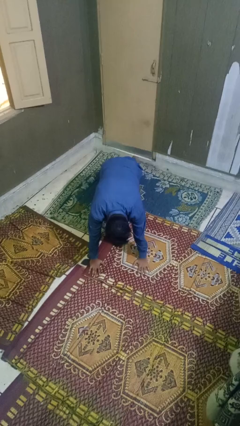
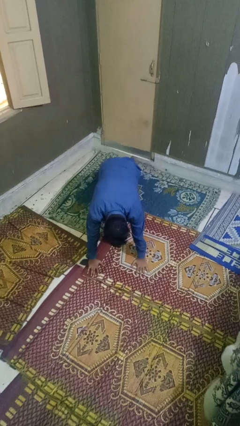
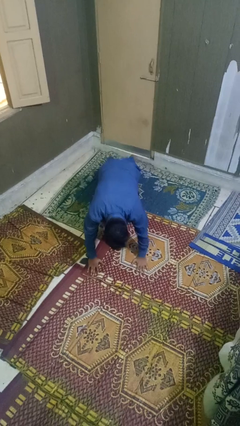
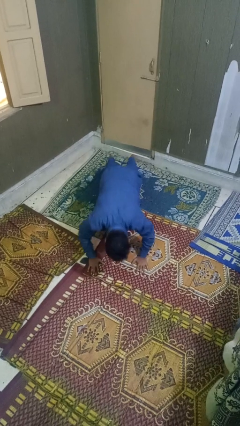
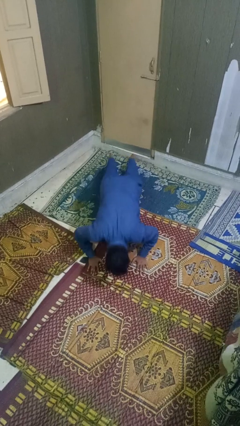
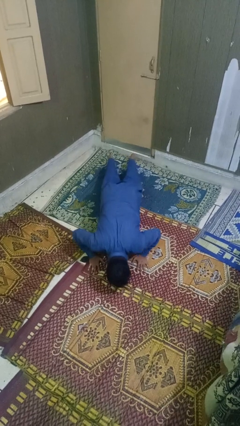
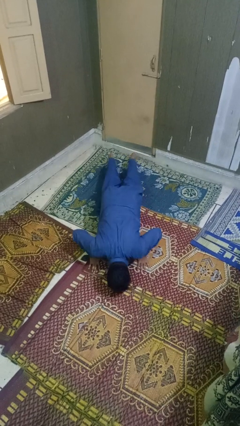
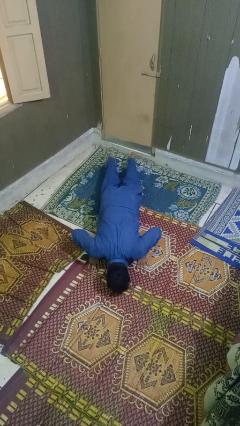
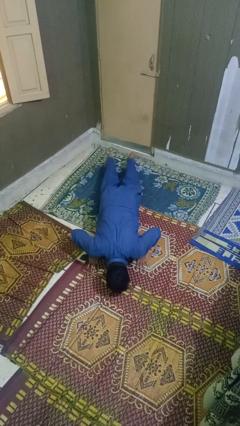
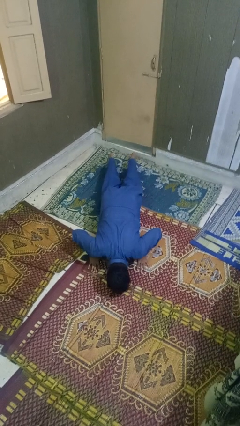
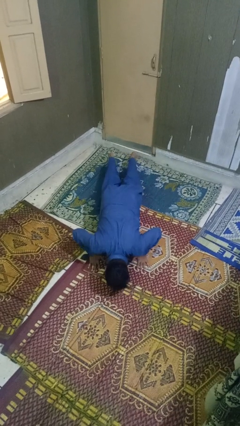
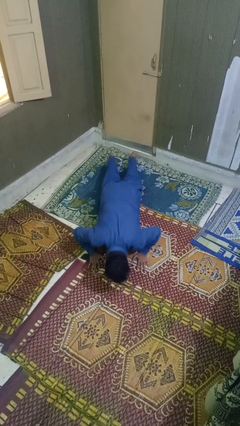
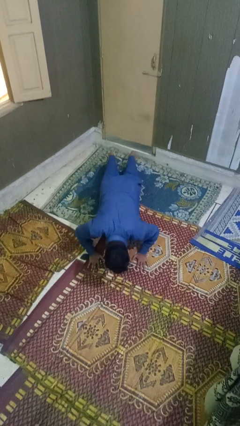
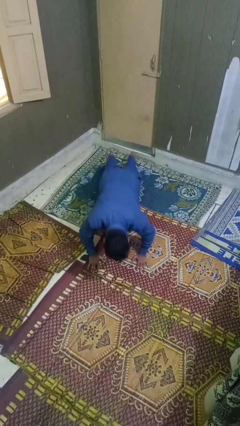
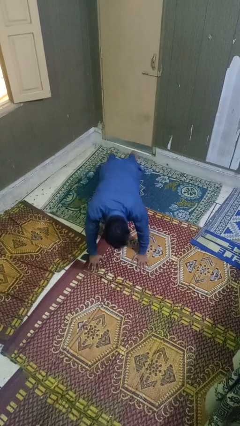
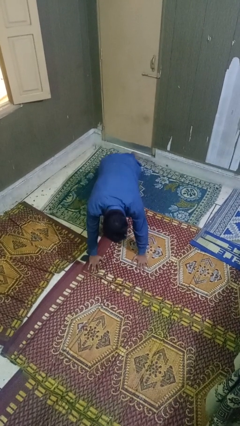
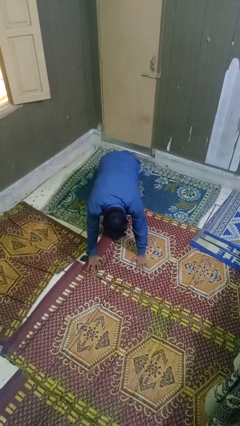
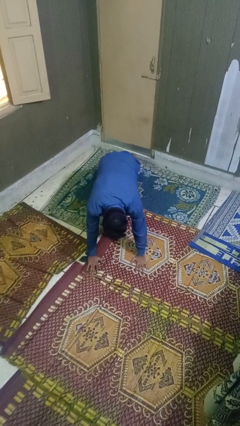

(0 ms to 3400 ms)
person exercises with pushup

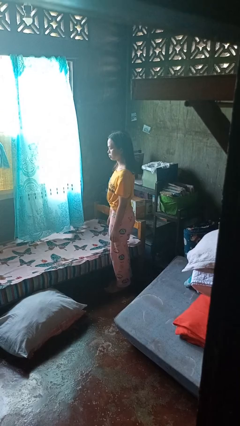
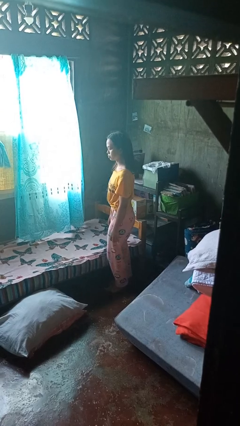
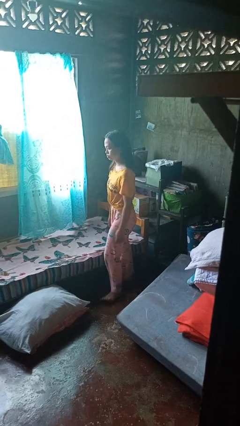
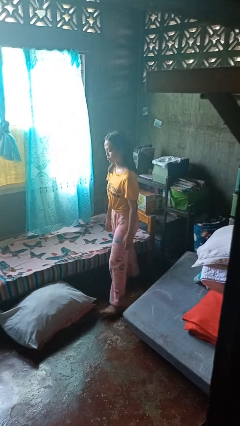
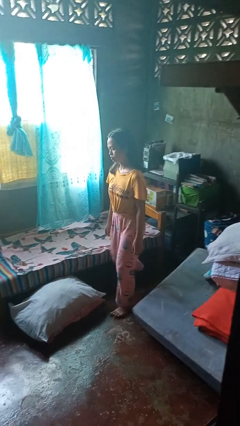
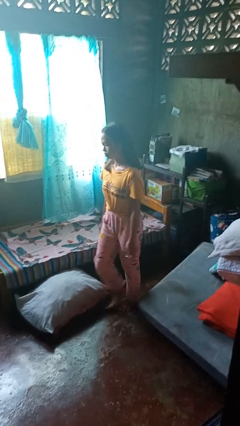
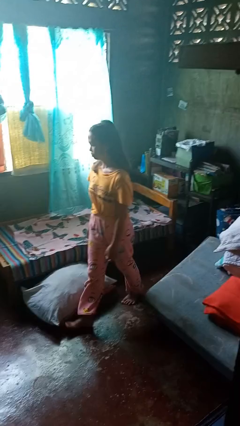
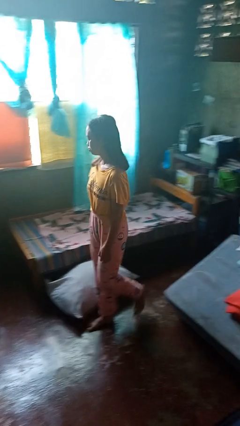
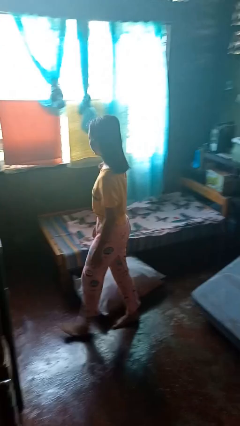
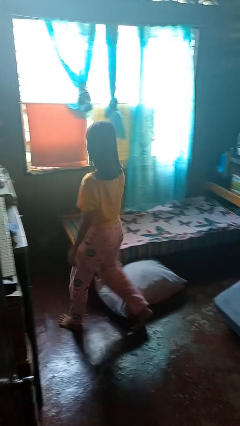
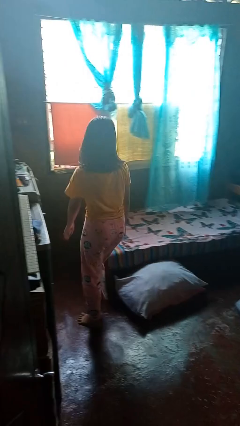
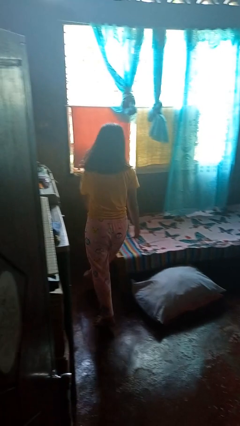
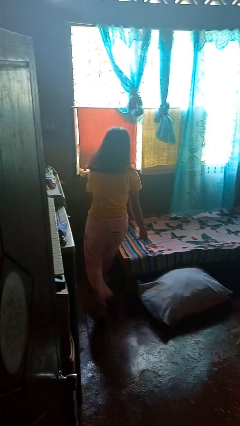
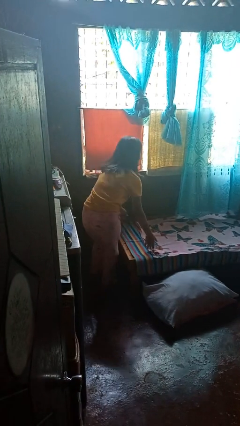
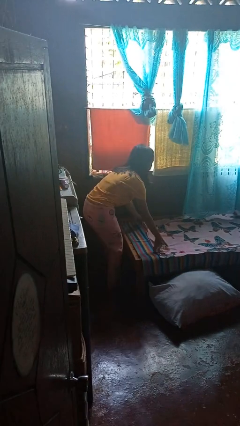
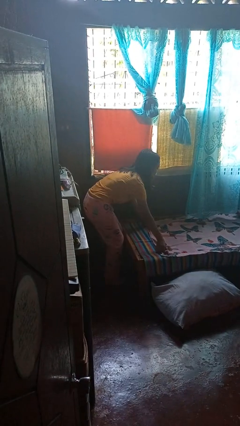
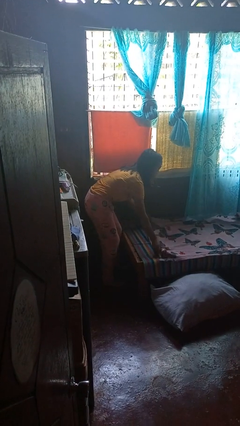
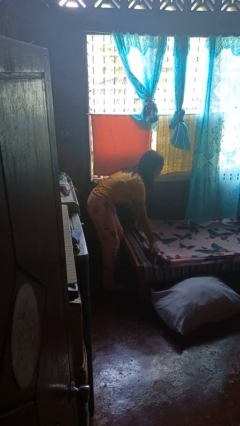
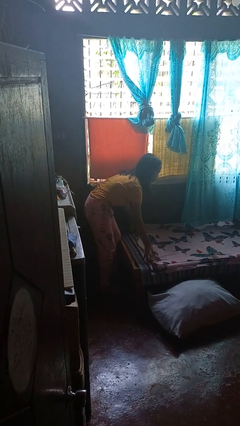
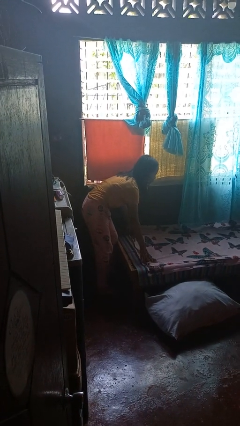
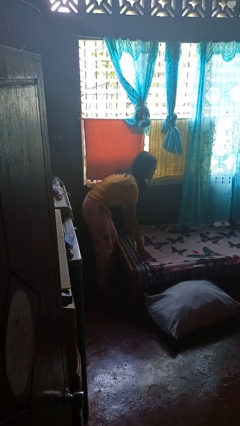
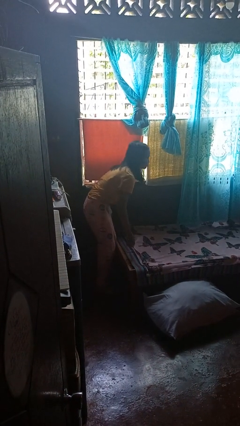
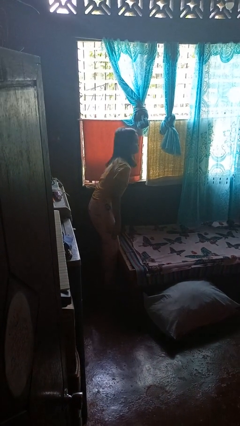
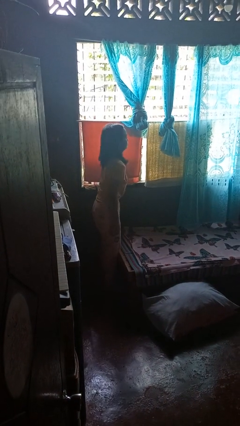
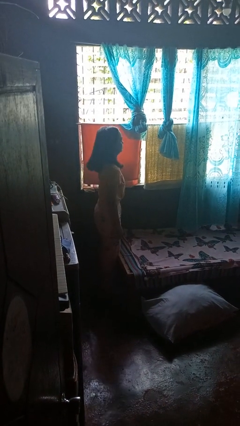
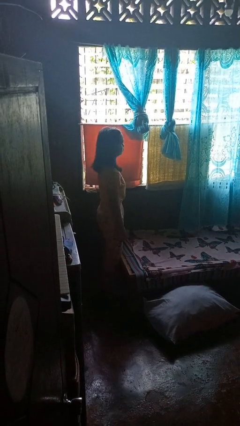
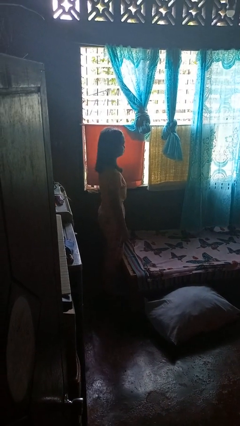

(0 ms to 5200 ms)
person makes bed

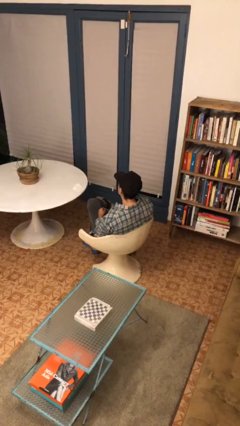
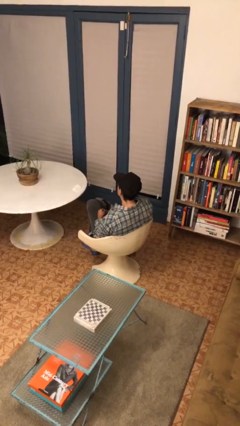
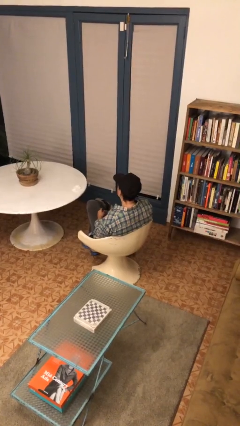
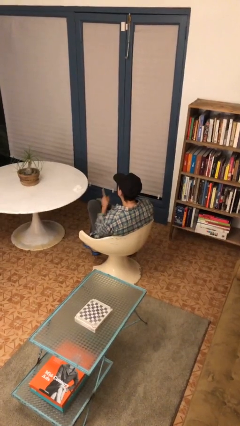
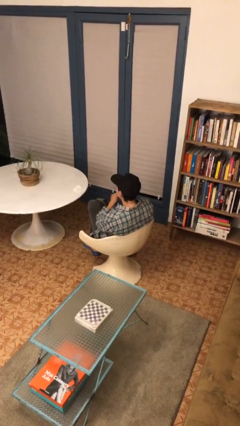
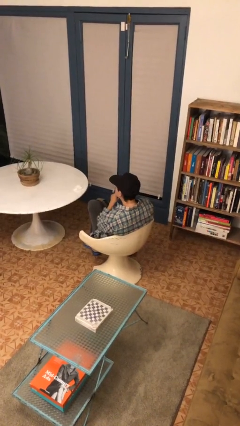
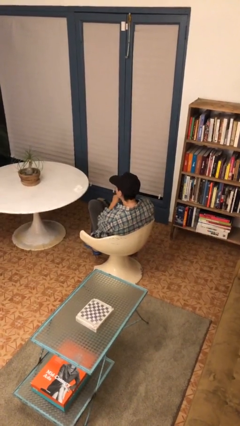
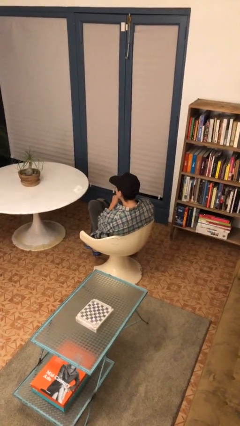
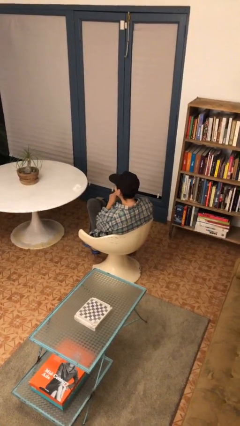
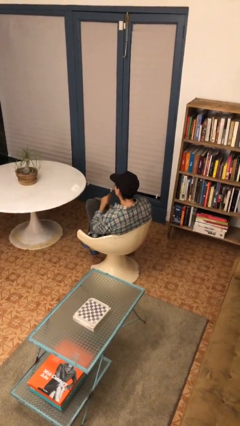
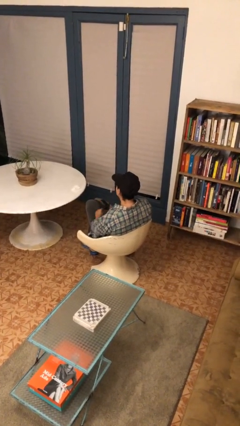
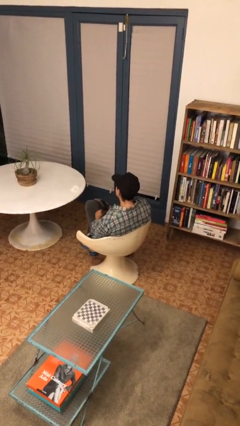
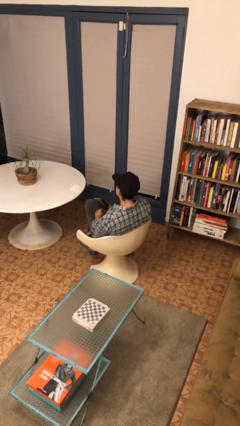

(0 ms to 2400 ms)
person gestures be quiet

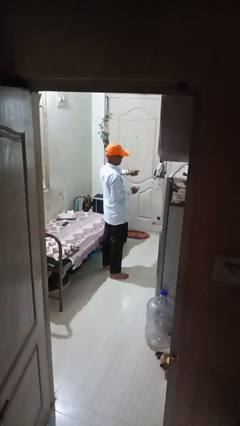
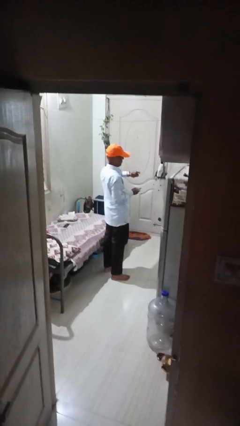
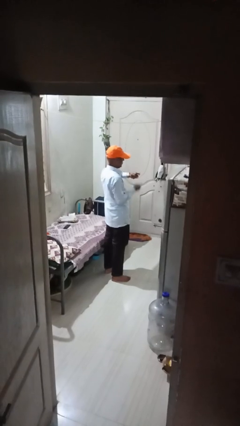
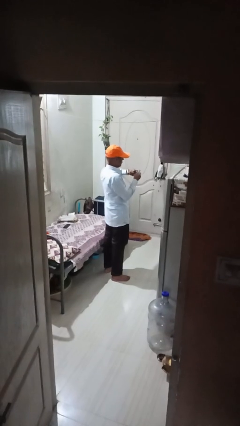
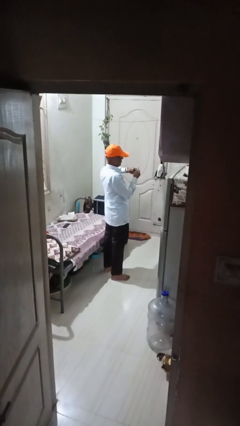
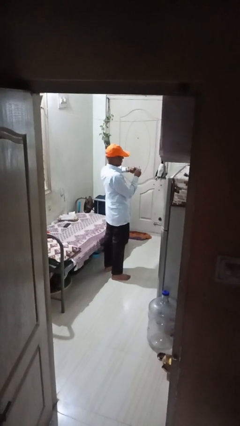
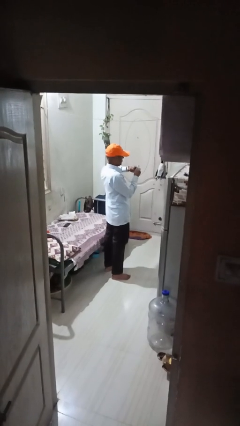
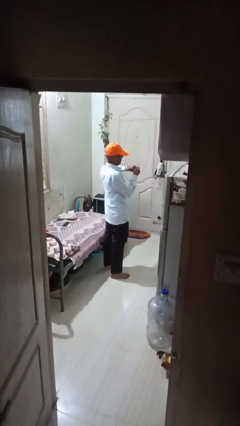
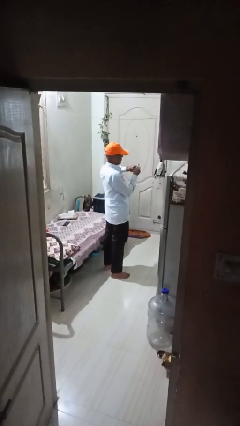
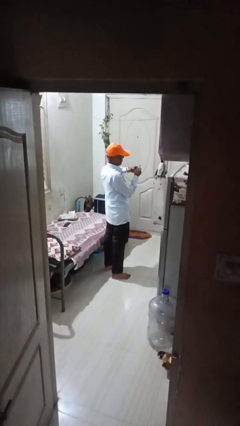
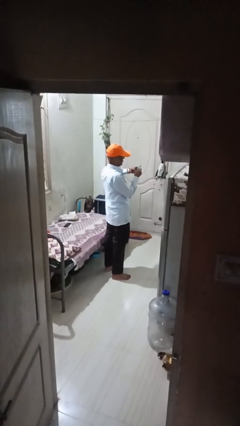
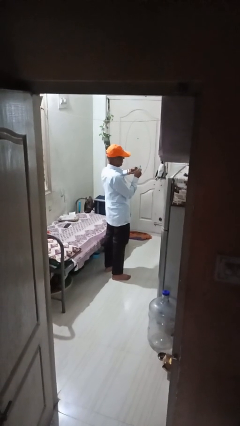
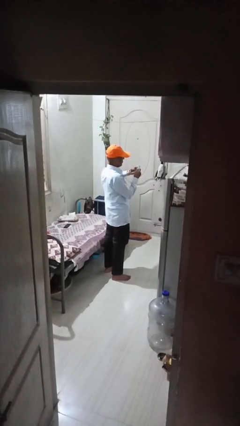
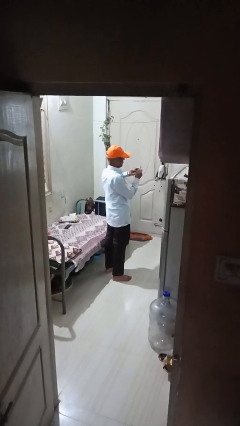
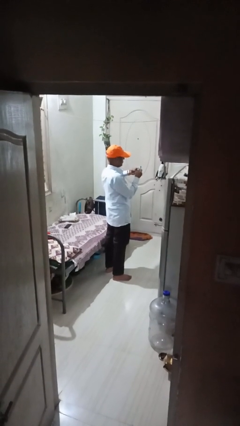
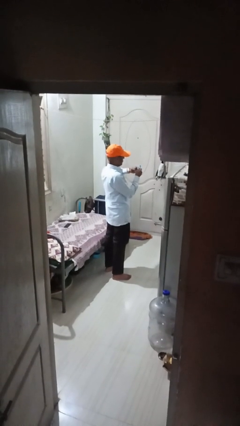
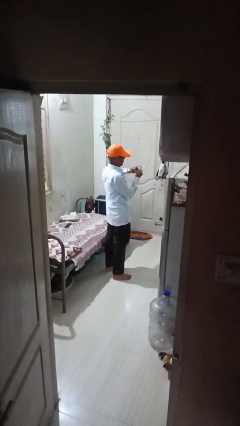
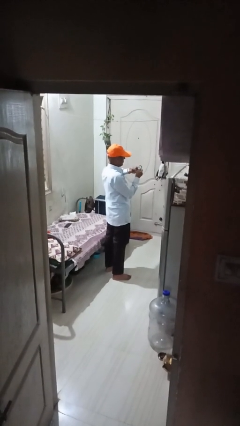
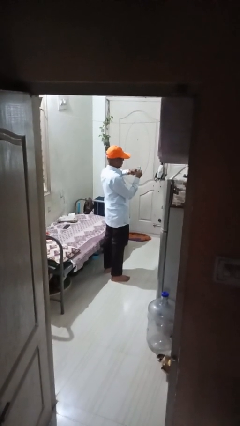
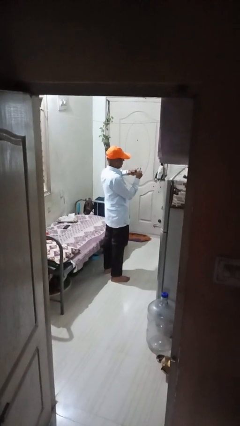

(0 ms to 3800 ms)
person files fingernails

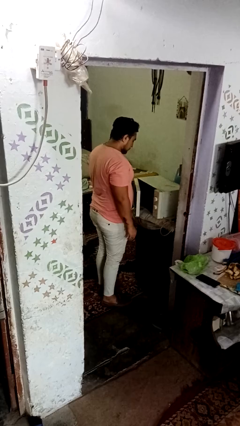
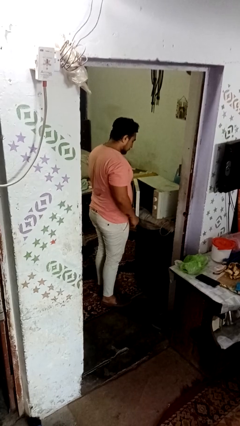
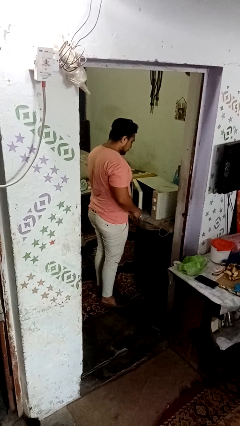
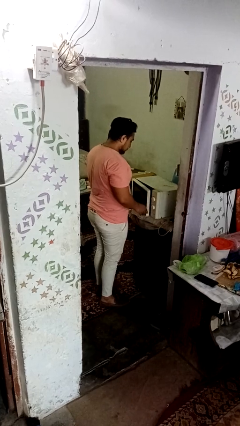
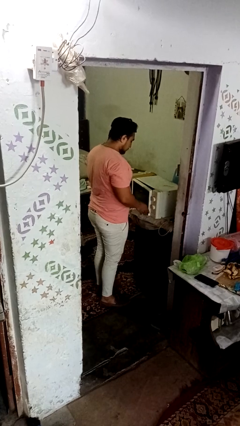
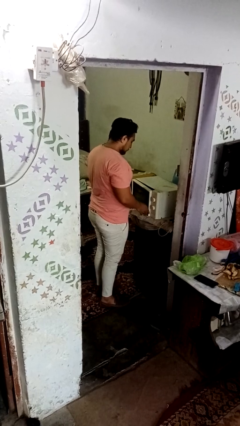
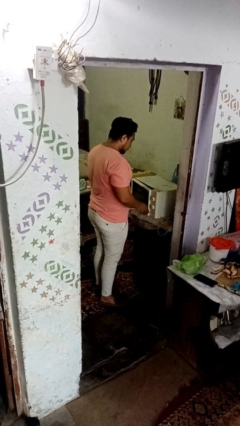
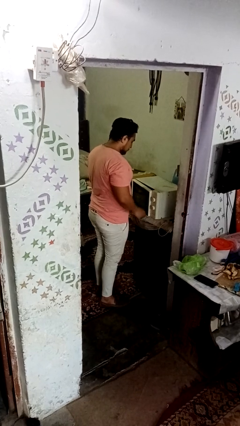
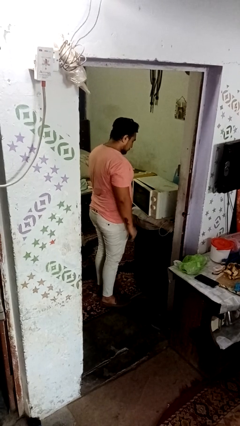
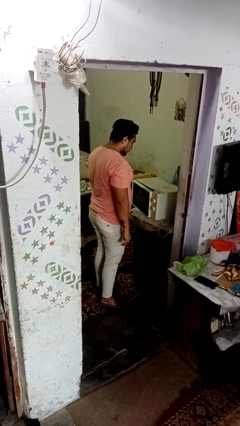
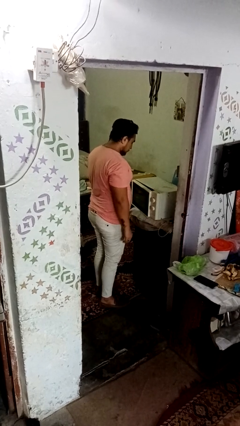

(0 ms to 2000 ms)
person closes dishwasher

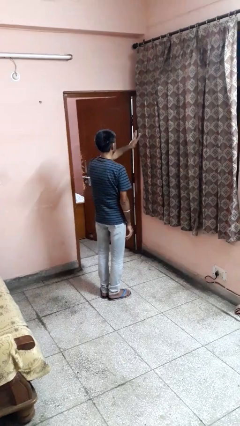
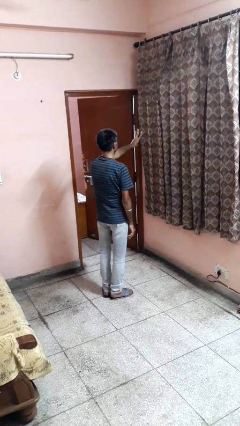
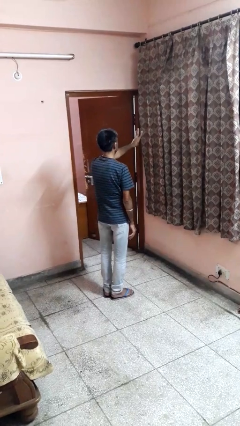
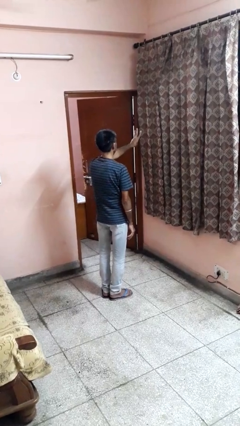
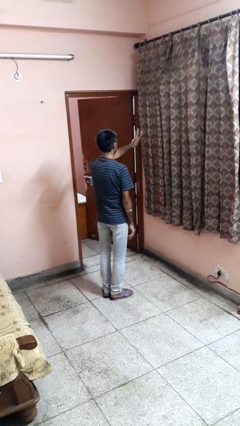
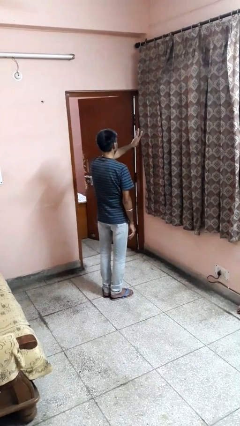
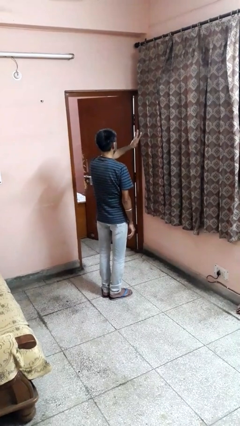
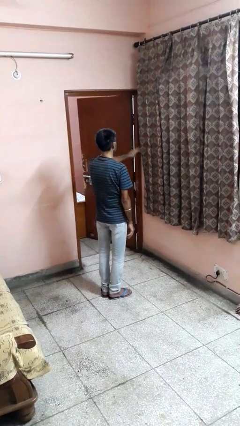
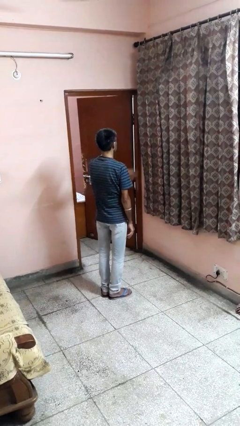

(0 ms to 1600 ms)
person gestures number three
